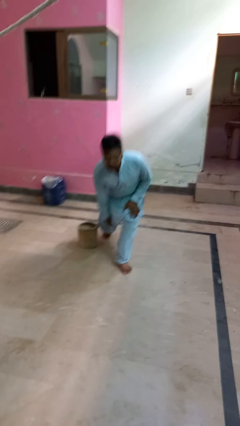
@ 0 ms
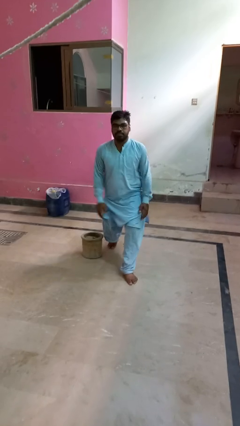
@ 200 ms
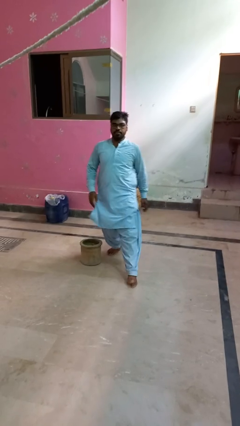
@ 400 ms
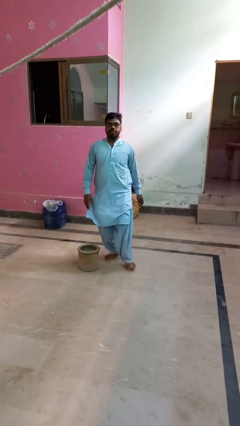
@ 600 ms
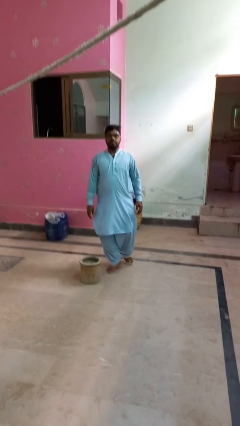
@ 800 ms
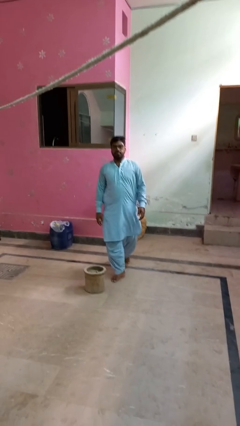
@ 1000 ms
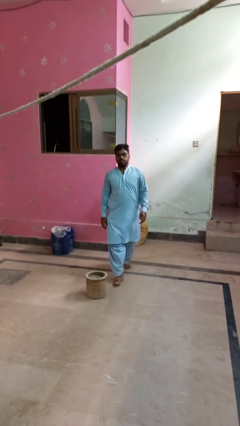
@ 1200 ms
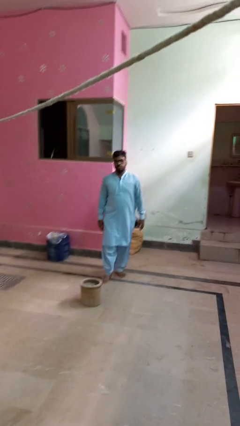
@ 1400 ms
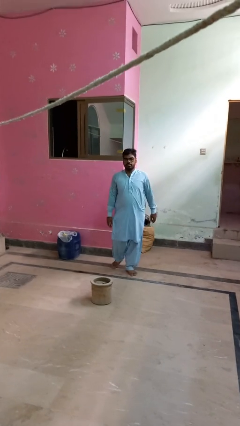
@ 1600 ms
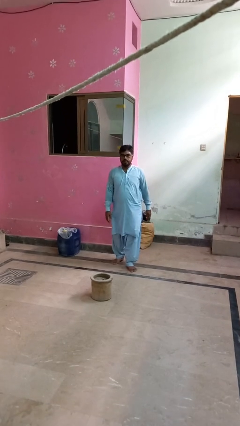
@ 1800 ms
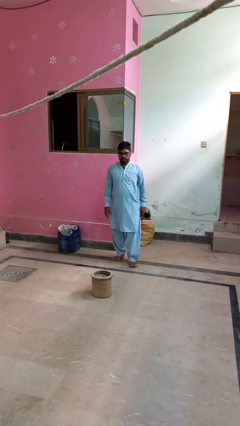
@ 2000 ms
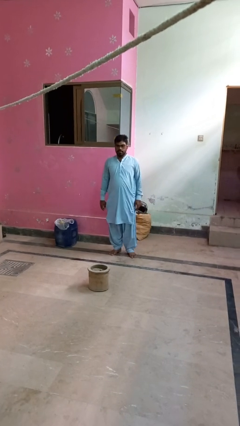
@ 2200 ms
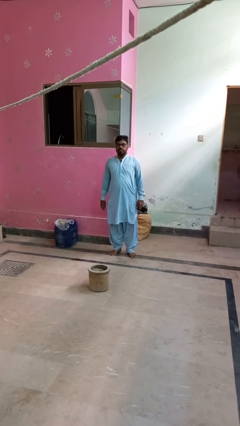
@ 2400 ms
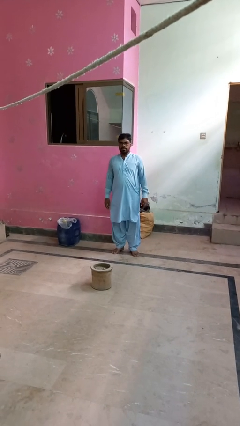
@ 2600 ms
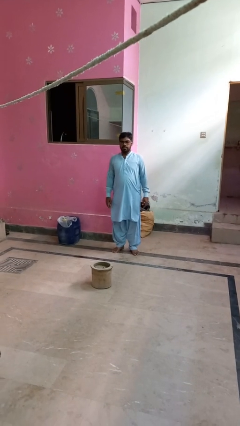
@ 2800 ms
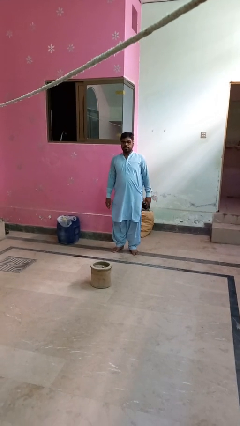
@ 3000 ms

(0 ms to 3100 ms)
person stands up from floor

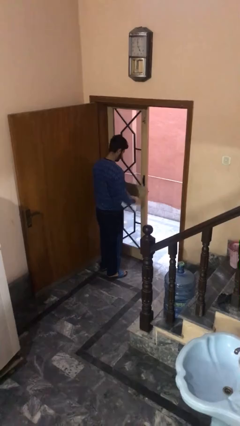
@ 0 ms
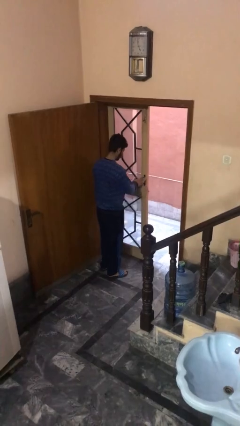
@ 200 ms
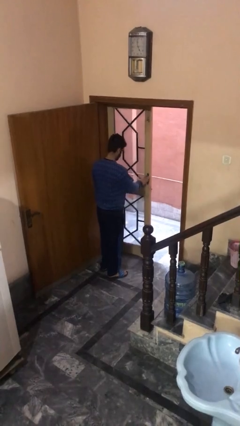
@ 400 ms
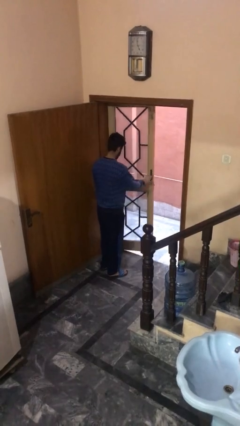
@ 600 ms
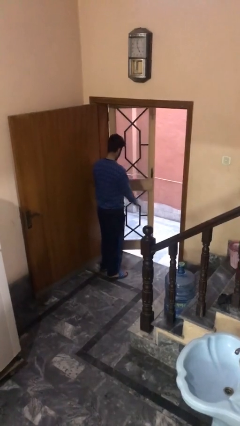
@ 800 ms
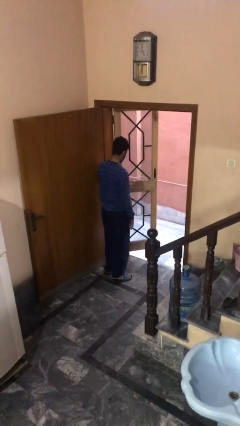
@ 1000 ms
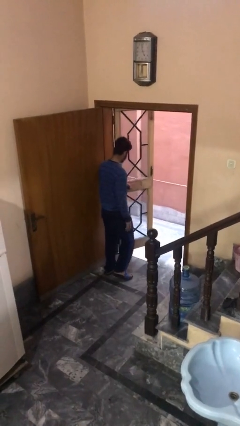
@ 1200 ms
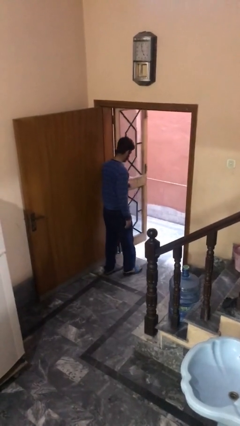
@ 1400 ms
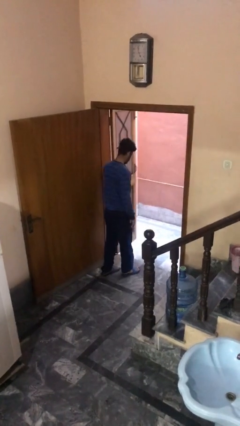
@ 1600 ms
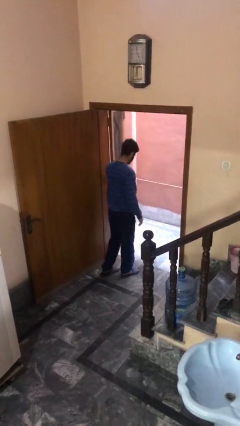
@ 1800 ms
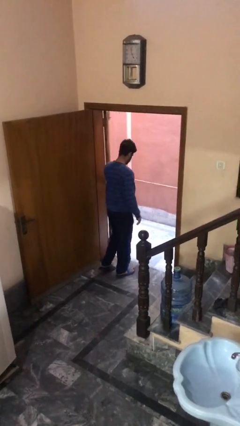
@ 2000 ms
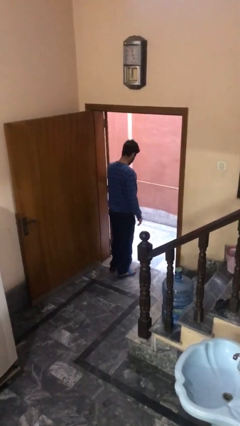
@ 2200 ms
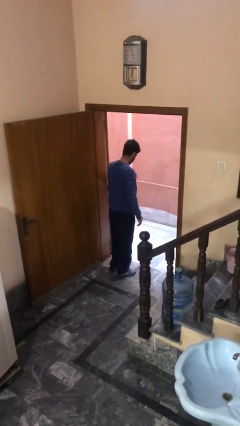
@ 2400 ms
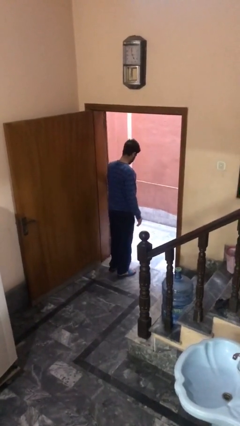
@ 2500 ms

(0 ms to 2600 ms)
person opens facility door

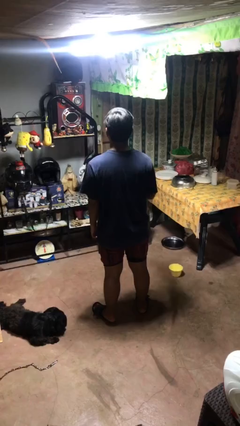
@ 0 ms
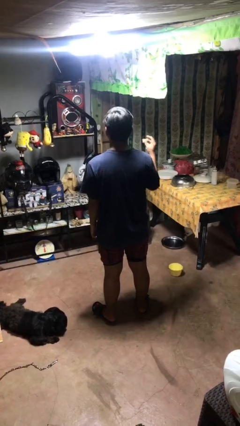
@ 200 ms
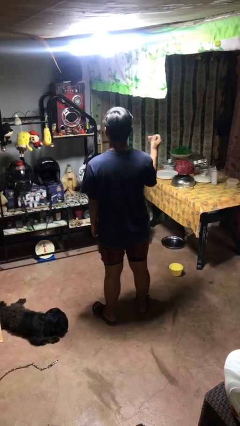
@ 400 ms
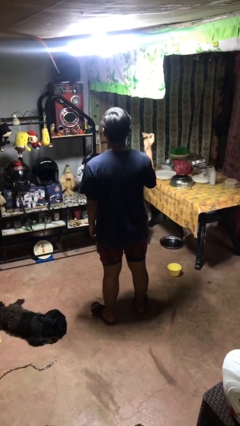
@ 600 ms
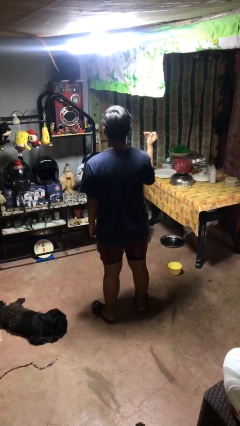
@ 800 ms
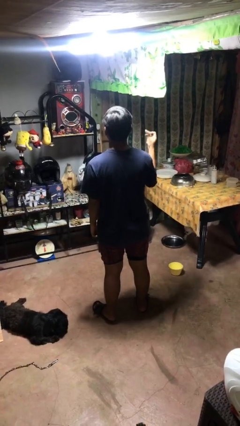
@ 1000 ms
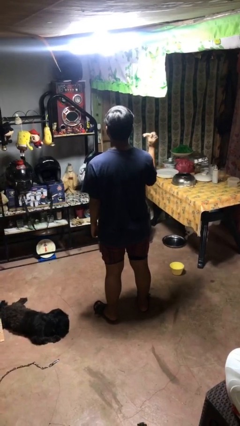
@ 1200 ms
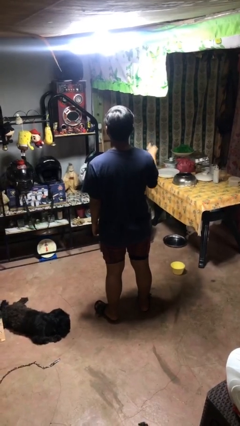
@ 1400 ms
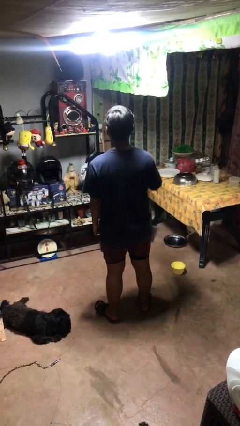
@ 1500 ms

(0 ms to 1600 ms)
person snaps fingers

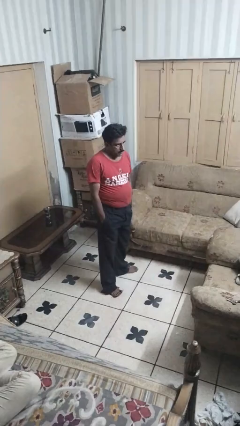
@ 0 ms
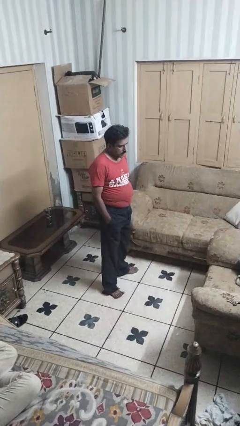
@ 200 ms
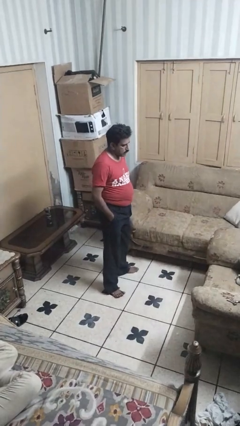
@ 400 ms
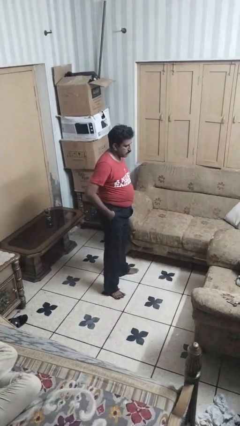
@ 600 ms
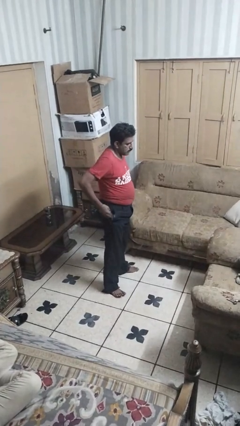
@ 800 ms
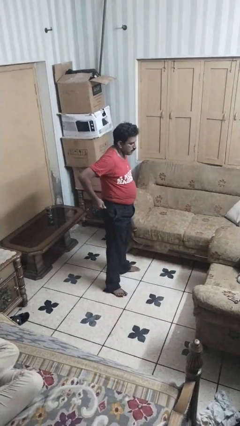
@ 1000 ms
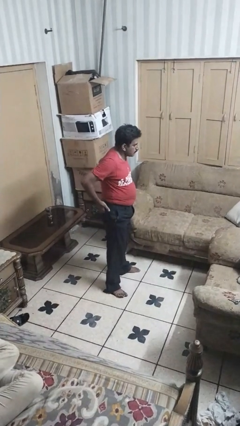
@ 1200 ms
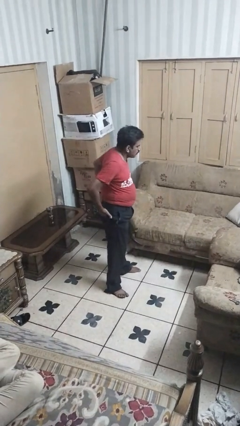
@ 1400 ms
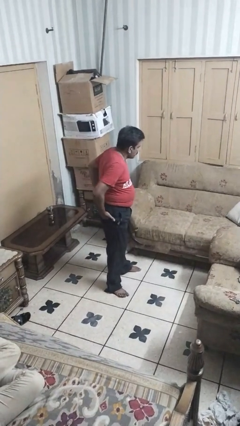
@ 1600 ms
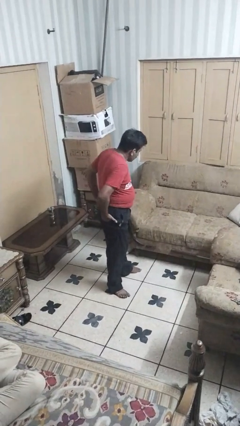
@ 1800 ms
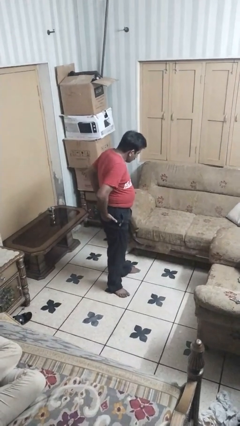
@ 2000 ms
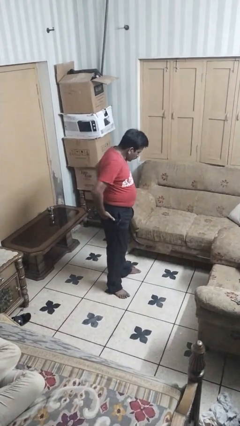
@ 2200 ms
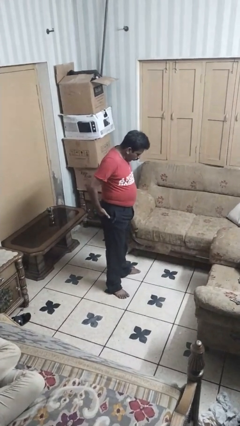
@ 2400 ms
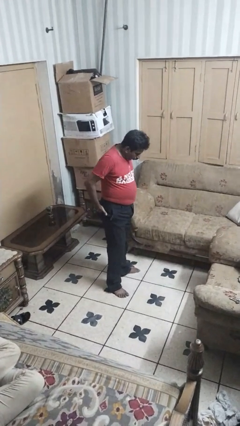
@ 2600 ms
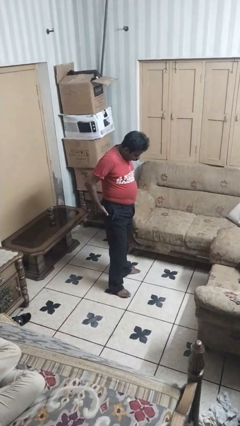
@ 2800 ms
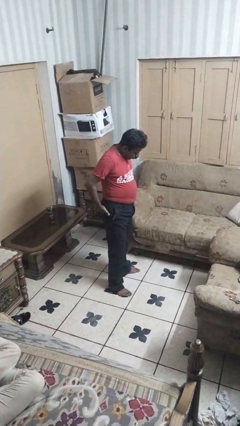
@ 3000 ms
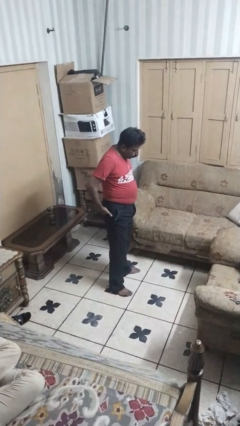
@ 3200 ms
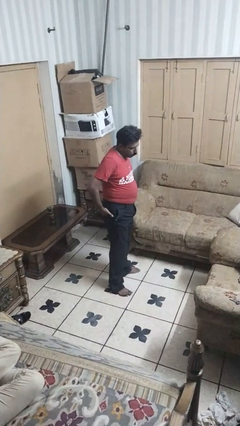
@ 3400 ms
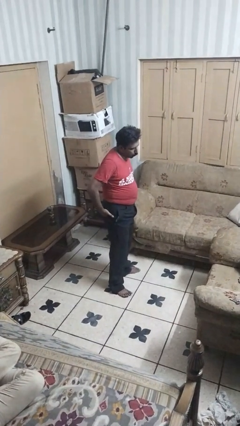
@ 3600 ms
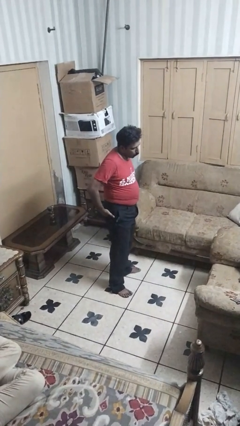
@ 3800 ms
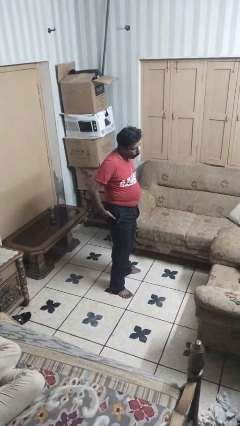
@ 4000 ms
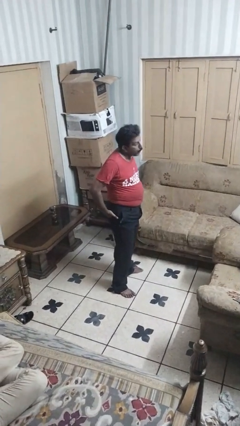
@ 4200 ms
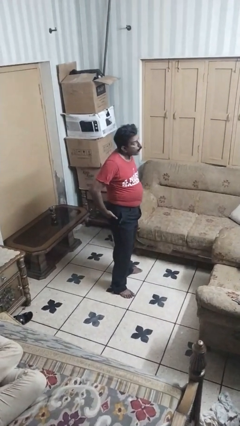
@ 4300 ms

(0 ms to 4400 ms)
person puts hands in back pockets

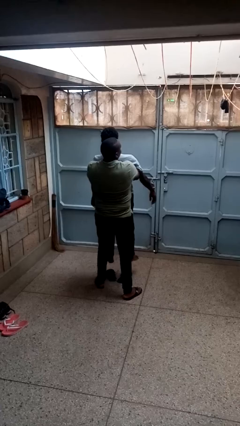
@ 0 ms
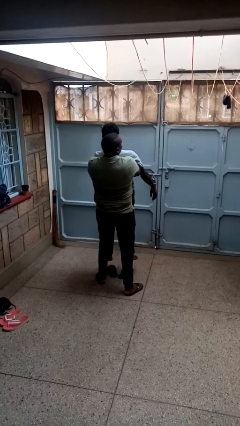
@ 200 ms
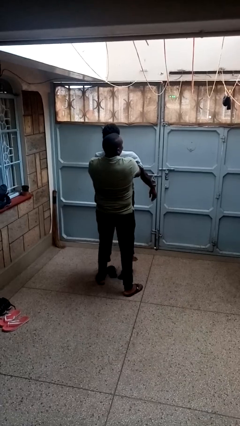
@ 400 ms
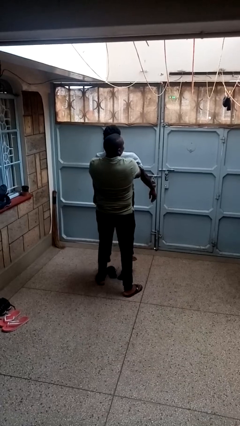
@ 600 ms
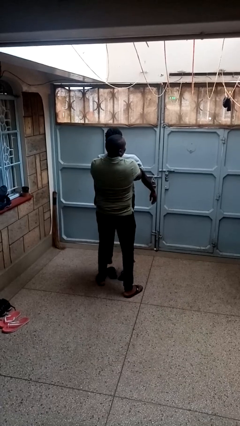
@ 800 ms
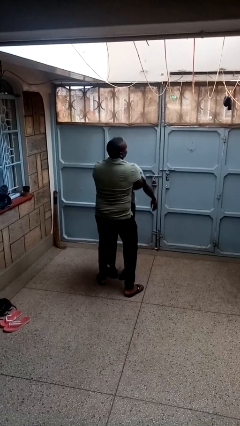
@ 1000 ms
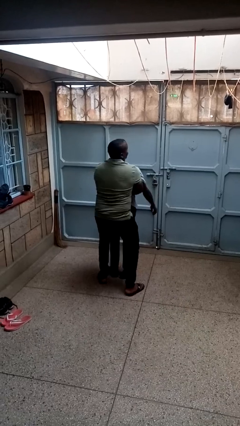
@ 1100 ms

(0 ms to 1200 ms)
person puts down person

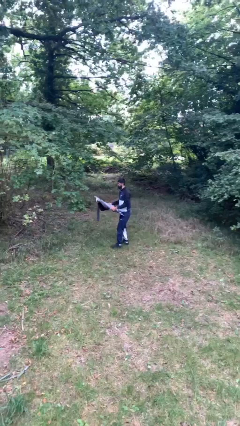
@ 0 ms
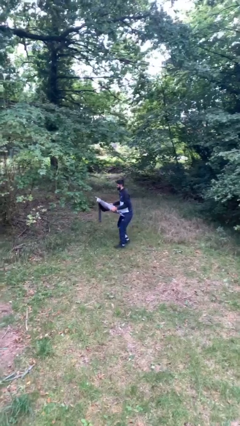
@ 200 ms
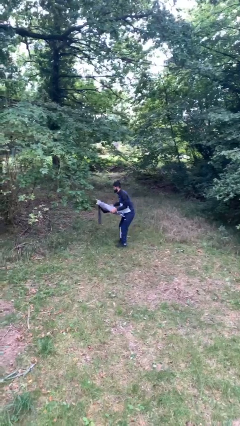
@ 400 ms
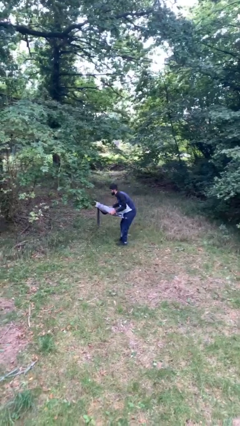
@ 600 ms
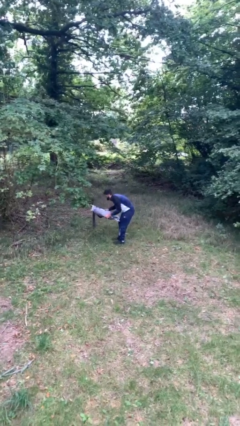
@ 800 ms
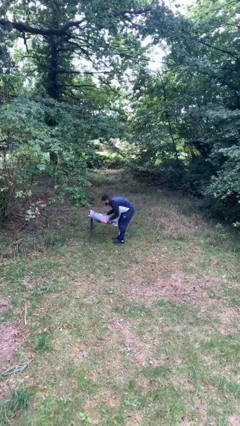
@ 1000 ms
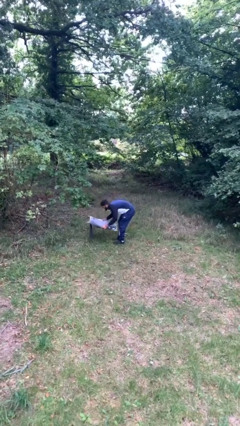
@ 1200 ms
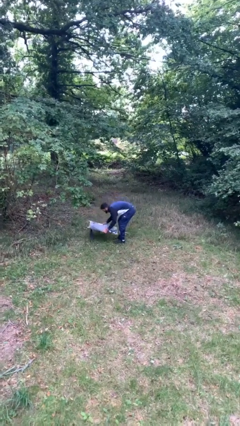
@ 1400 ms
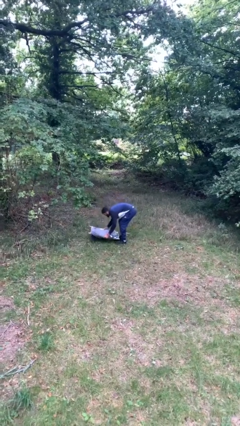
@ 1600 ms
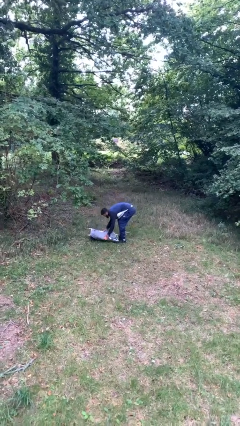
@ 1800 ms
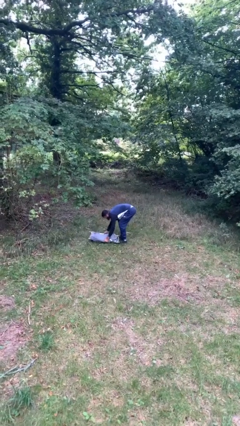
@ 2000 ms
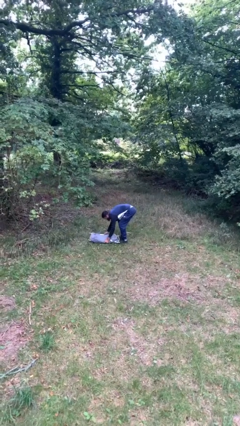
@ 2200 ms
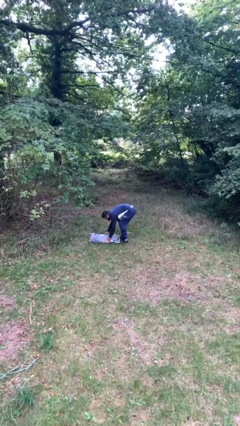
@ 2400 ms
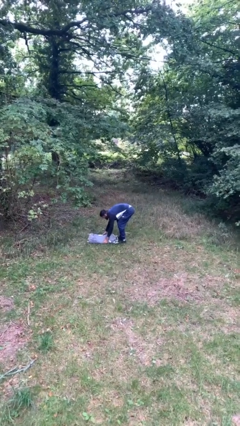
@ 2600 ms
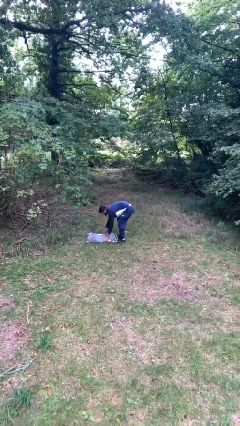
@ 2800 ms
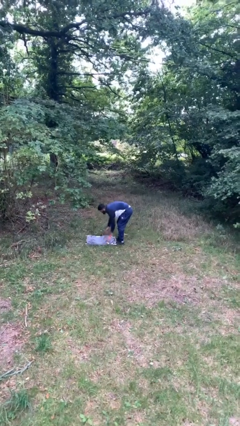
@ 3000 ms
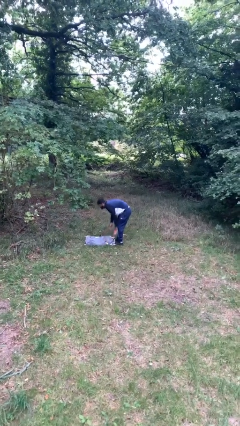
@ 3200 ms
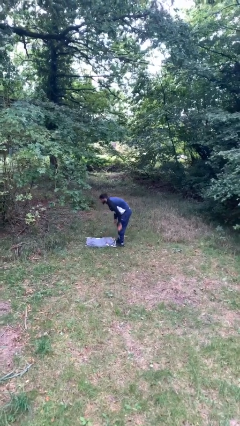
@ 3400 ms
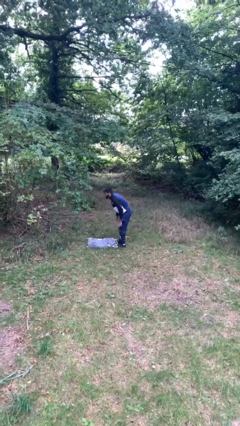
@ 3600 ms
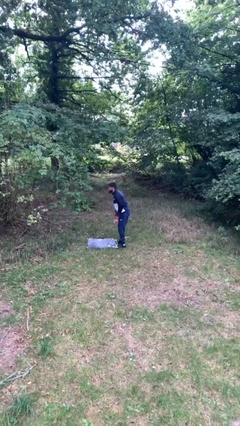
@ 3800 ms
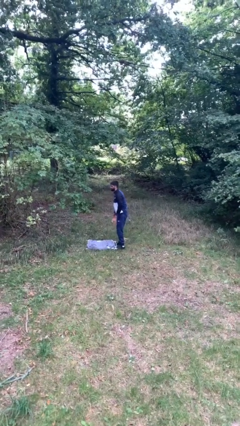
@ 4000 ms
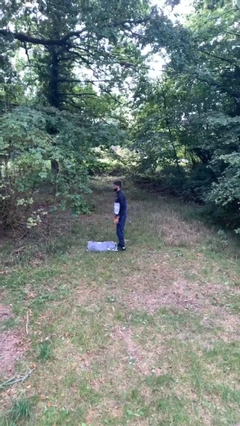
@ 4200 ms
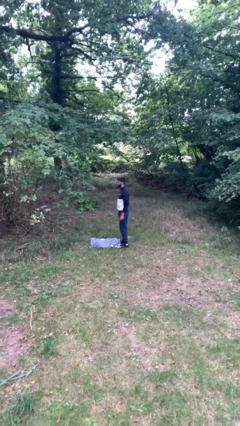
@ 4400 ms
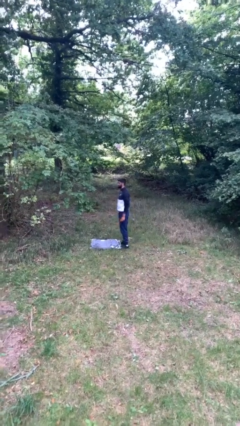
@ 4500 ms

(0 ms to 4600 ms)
person puts down object on floor
